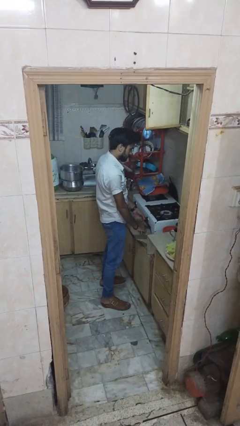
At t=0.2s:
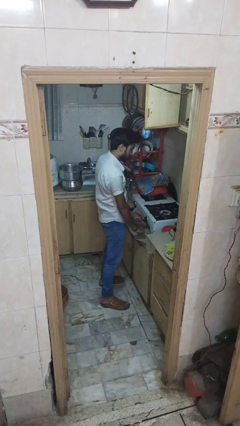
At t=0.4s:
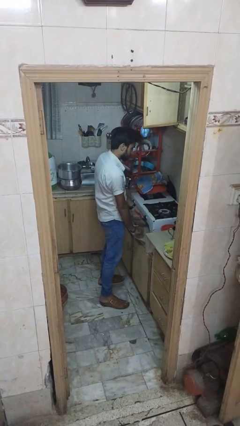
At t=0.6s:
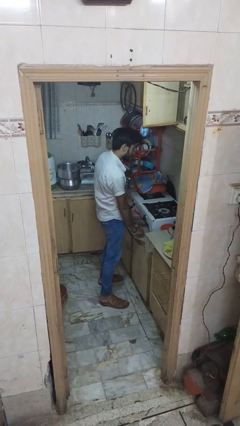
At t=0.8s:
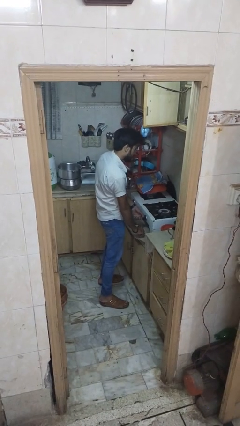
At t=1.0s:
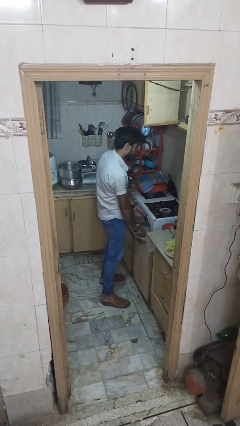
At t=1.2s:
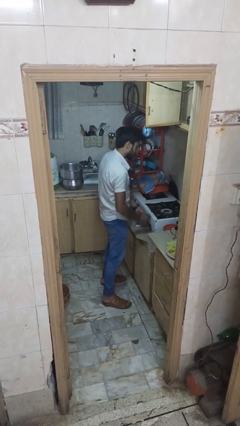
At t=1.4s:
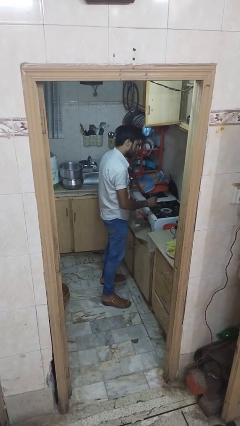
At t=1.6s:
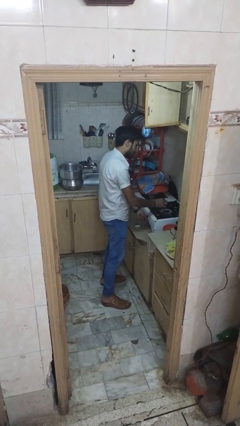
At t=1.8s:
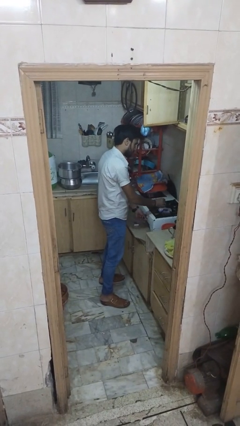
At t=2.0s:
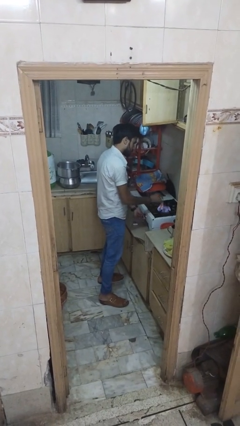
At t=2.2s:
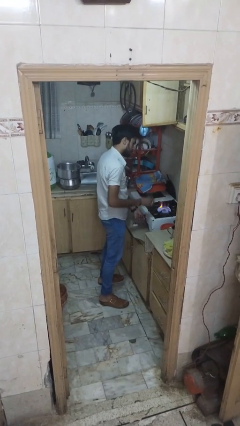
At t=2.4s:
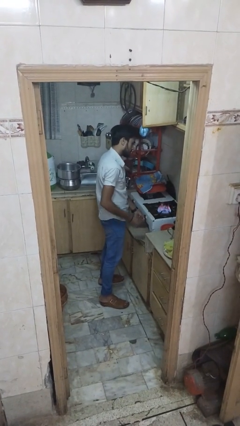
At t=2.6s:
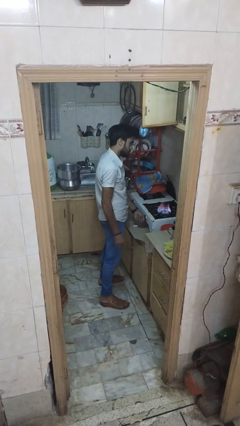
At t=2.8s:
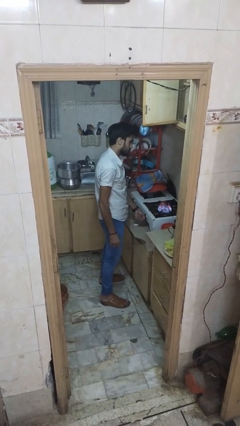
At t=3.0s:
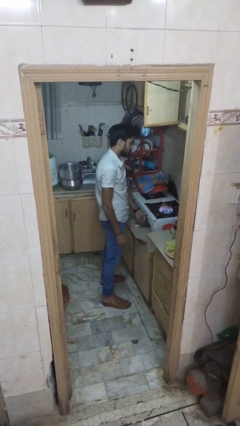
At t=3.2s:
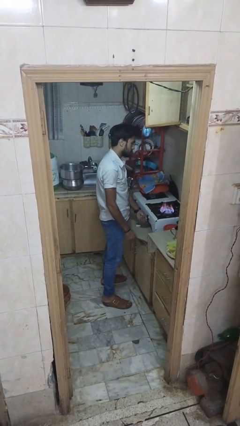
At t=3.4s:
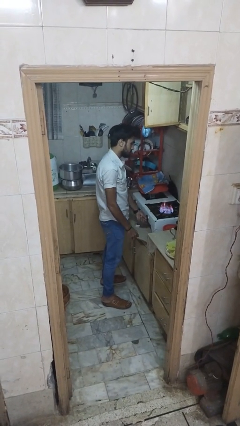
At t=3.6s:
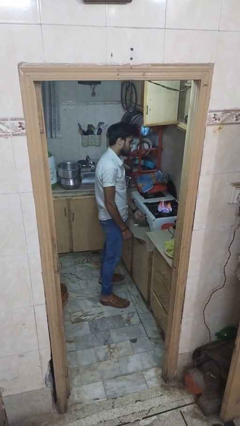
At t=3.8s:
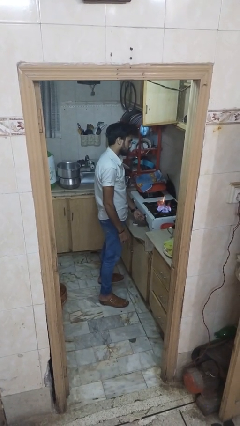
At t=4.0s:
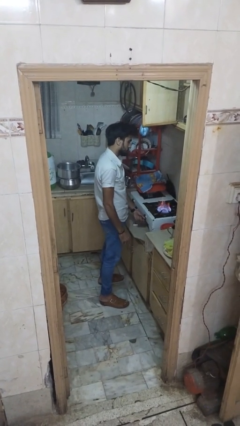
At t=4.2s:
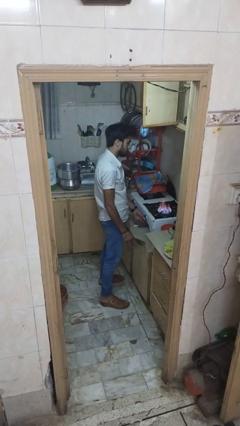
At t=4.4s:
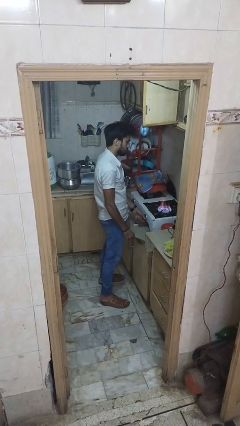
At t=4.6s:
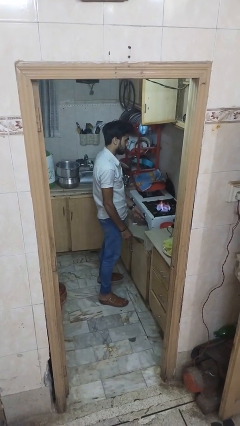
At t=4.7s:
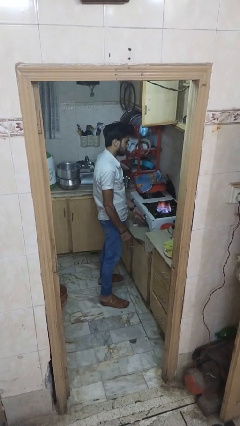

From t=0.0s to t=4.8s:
person turns on stovetop

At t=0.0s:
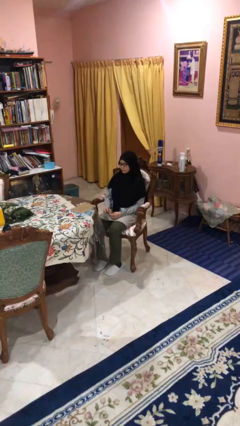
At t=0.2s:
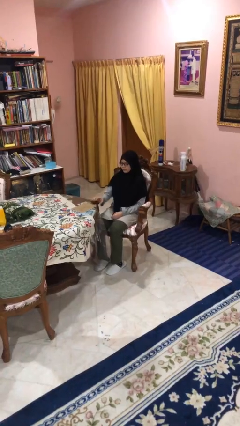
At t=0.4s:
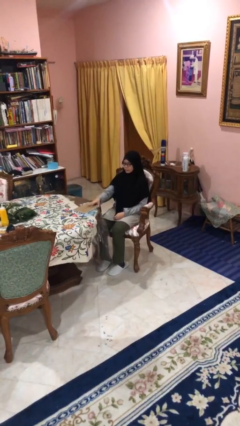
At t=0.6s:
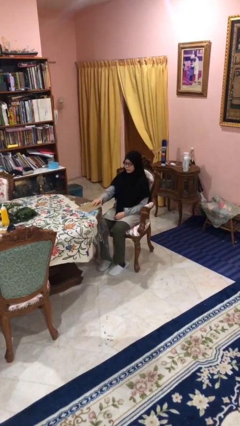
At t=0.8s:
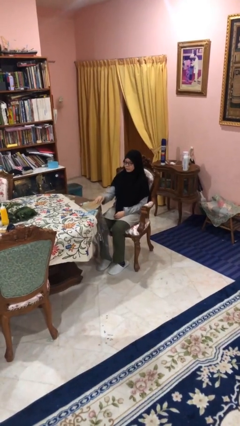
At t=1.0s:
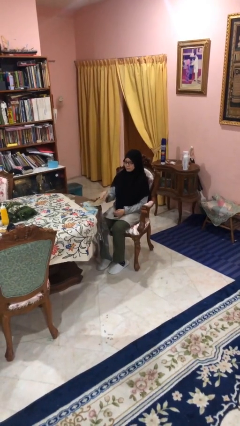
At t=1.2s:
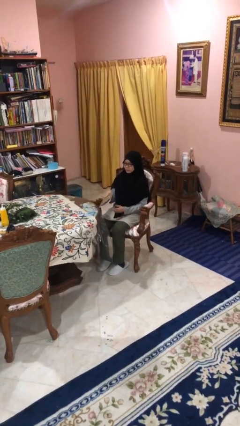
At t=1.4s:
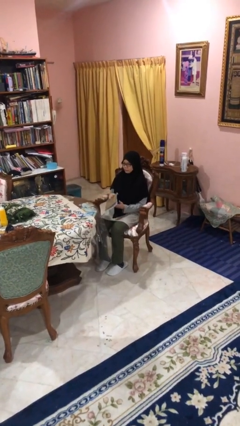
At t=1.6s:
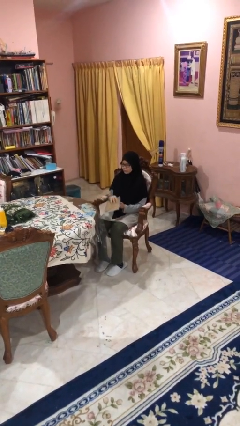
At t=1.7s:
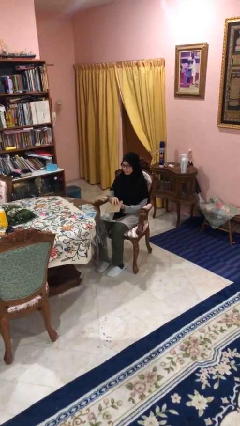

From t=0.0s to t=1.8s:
person picks up object from table

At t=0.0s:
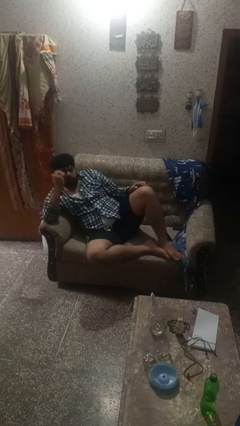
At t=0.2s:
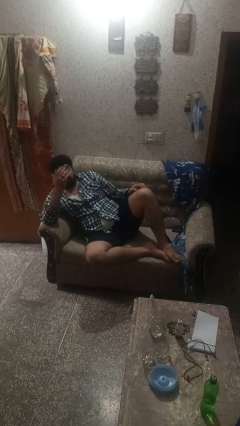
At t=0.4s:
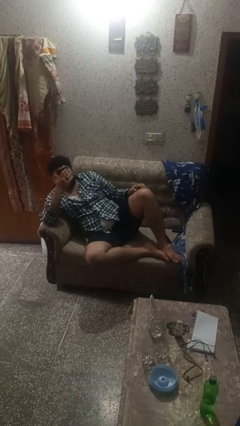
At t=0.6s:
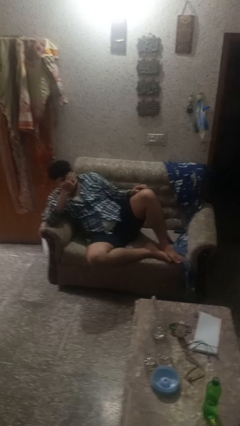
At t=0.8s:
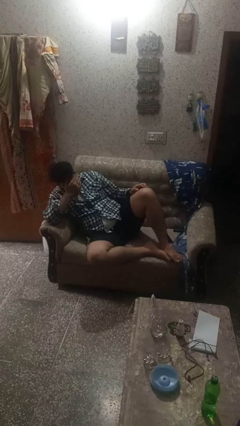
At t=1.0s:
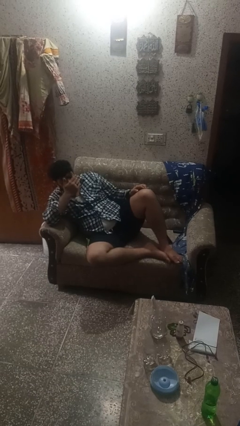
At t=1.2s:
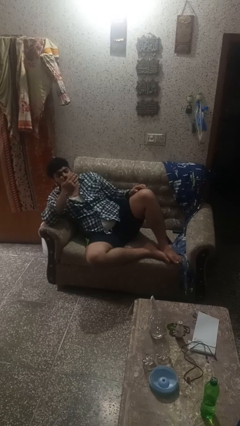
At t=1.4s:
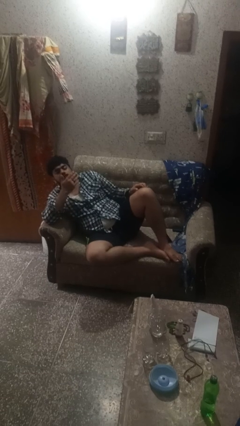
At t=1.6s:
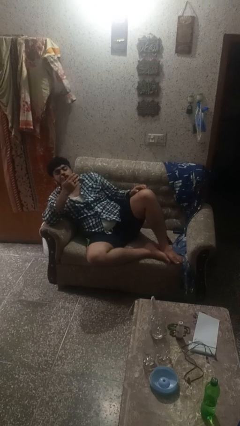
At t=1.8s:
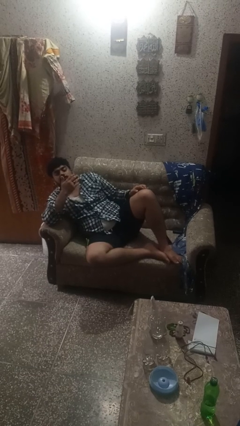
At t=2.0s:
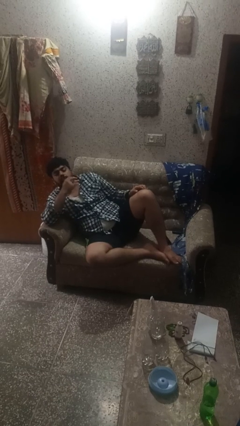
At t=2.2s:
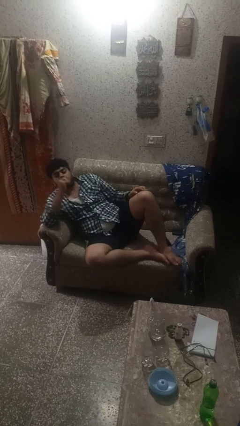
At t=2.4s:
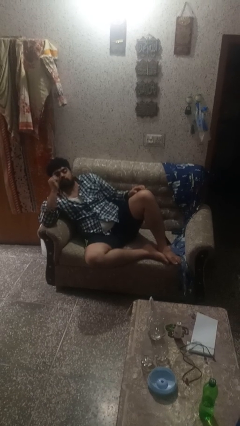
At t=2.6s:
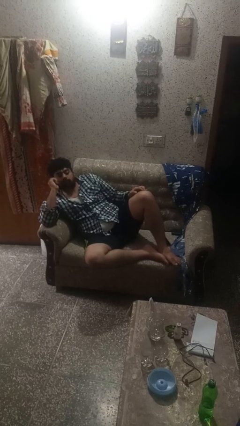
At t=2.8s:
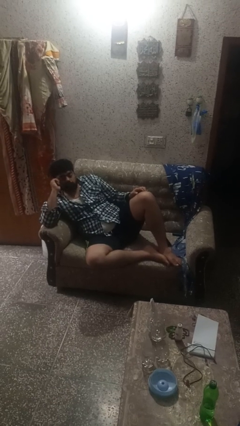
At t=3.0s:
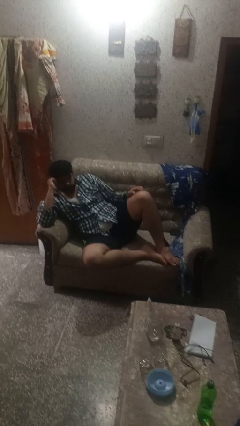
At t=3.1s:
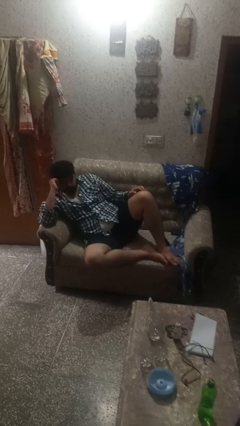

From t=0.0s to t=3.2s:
person sneezes into hand

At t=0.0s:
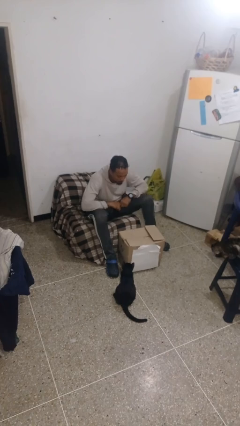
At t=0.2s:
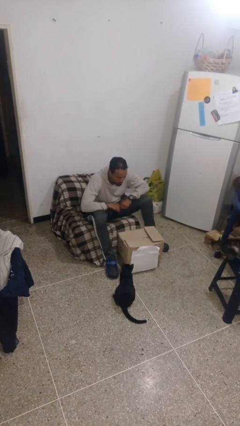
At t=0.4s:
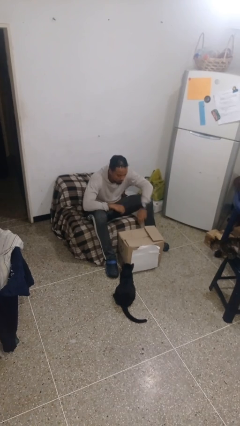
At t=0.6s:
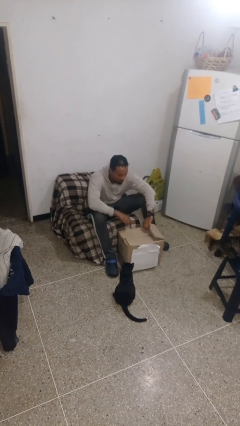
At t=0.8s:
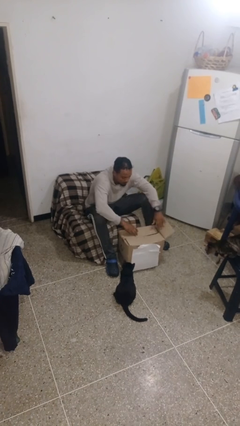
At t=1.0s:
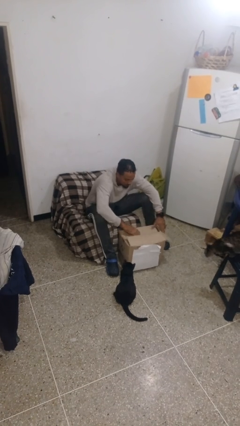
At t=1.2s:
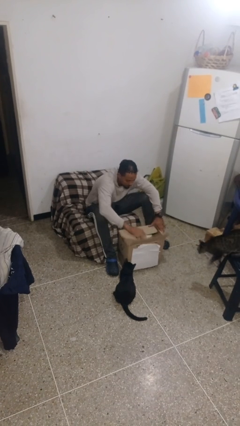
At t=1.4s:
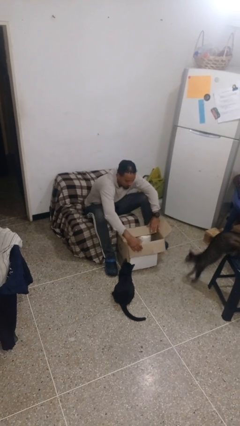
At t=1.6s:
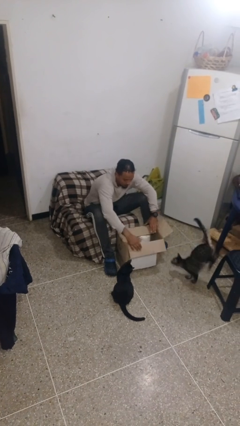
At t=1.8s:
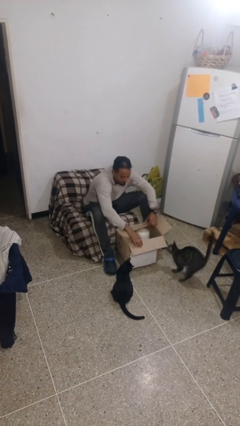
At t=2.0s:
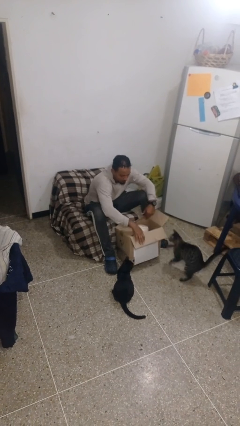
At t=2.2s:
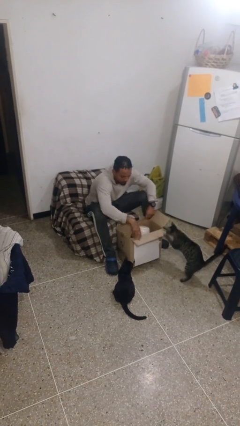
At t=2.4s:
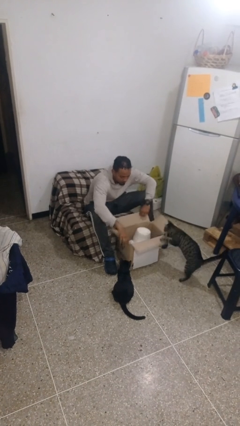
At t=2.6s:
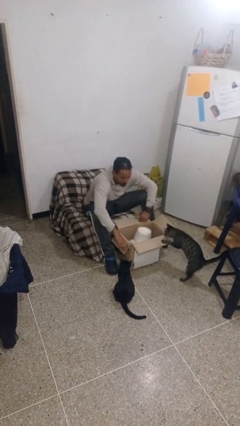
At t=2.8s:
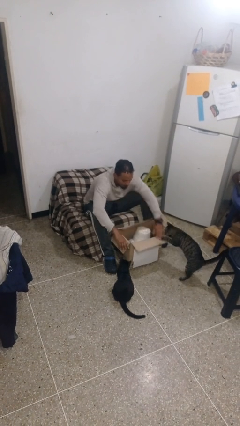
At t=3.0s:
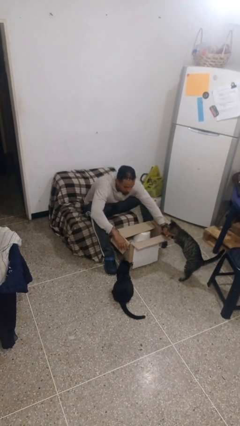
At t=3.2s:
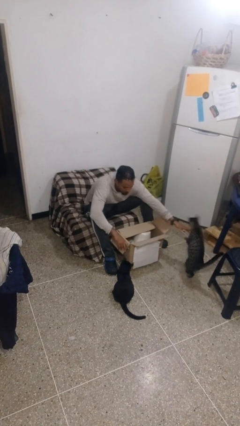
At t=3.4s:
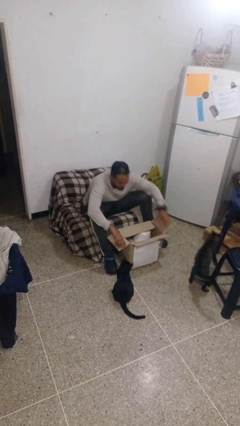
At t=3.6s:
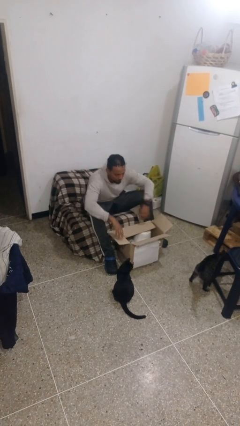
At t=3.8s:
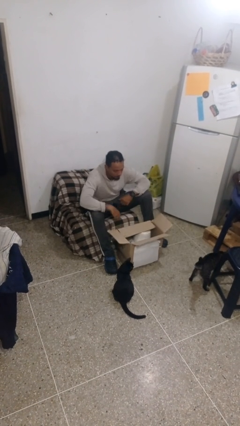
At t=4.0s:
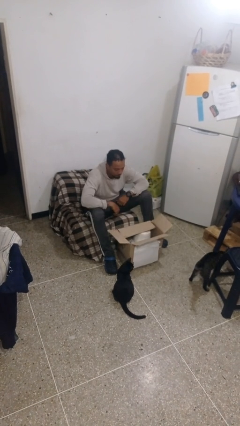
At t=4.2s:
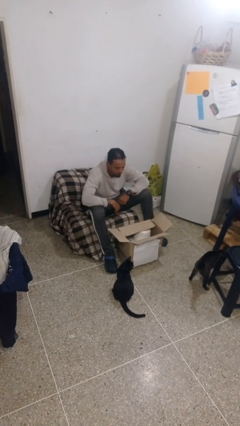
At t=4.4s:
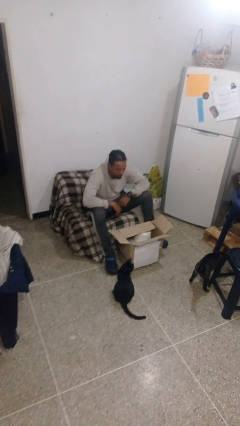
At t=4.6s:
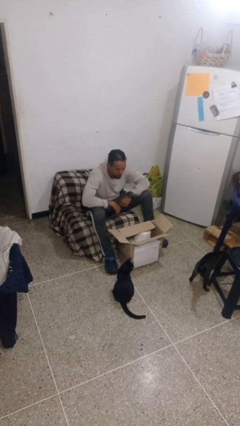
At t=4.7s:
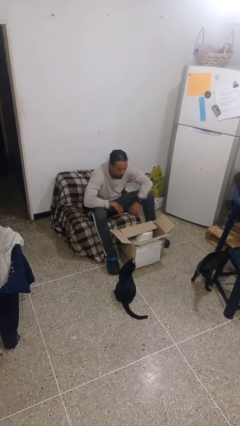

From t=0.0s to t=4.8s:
person opens box

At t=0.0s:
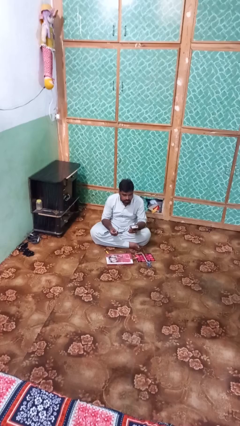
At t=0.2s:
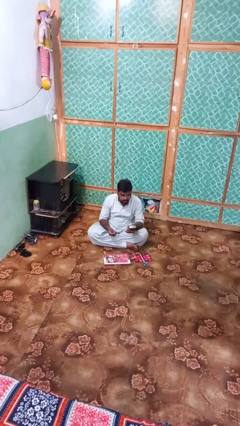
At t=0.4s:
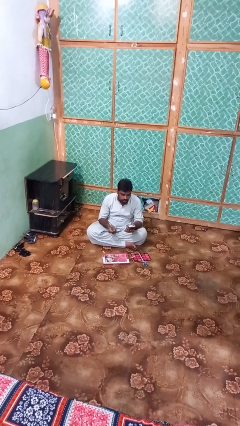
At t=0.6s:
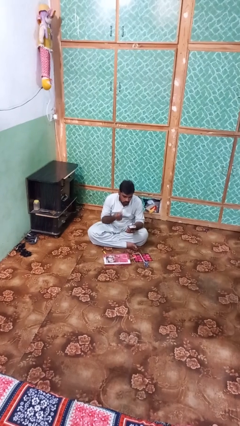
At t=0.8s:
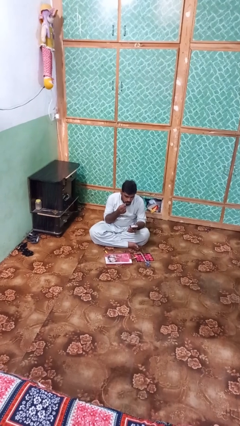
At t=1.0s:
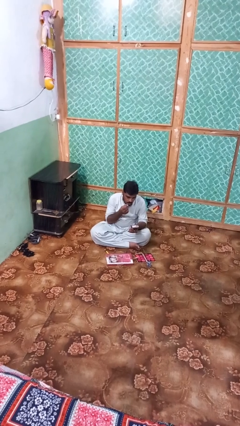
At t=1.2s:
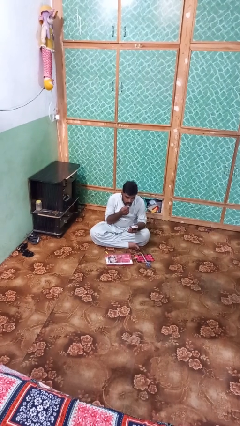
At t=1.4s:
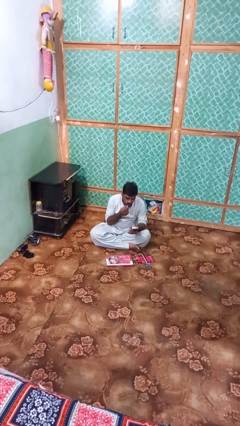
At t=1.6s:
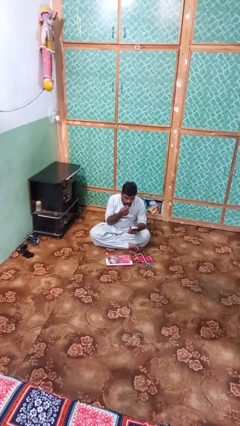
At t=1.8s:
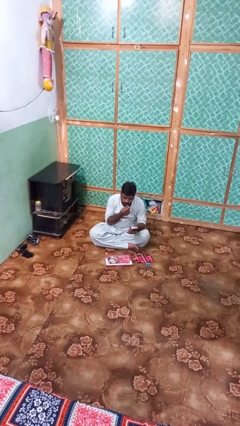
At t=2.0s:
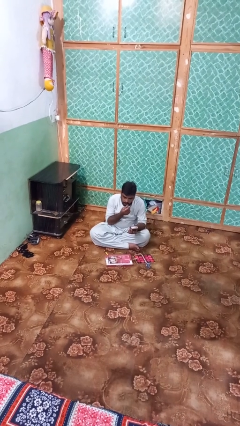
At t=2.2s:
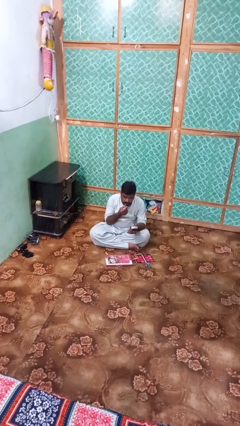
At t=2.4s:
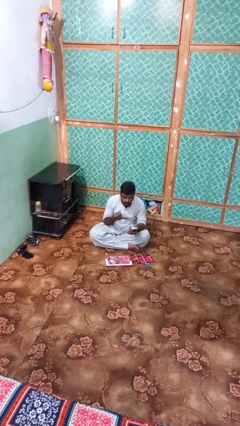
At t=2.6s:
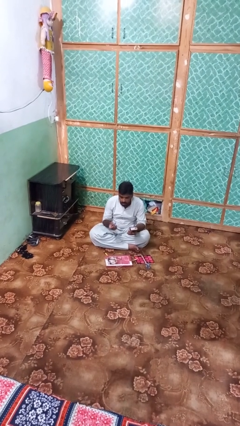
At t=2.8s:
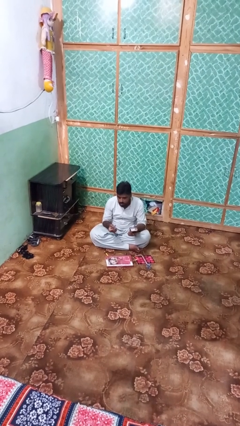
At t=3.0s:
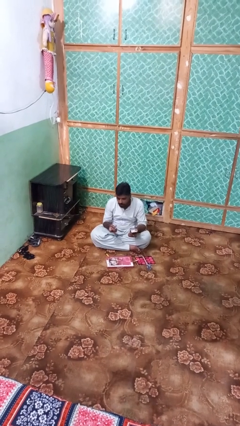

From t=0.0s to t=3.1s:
person applies lip makeup
